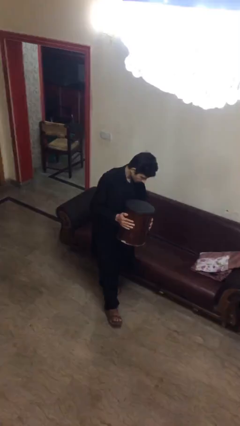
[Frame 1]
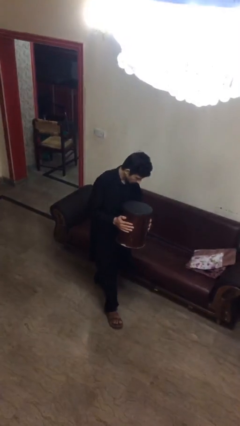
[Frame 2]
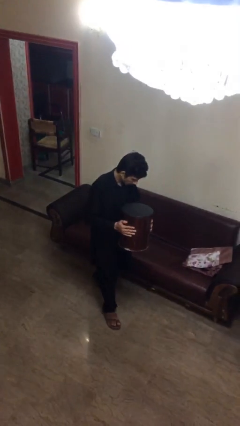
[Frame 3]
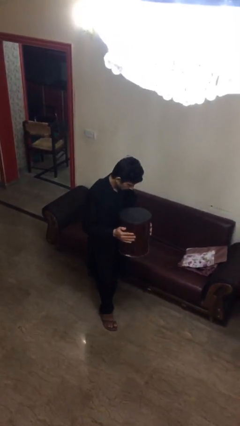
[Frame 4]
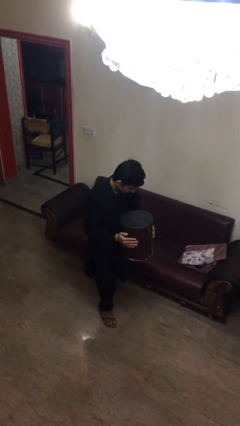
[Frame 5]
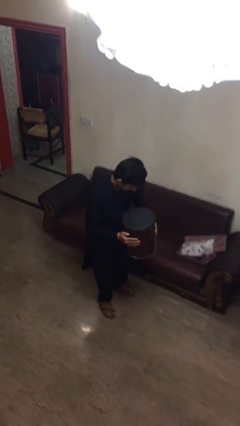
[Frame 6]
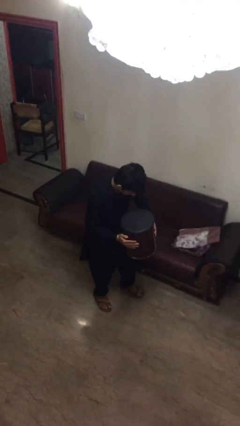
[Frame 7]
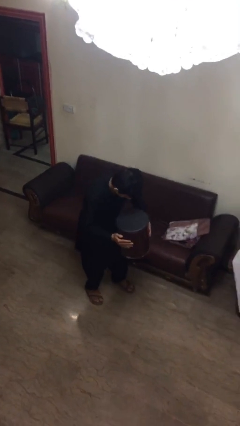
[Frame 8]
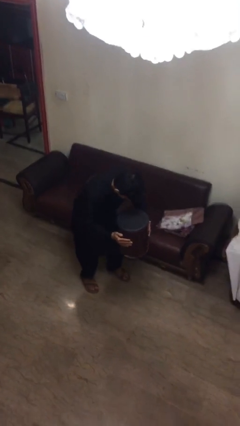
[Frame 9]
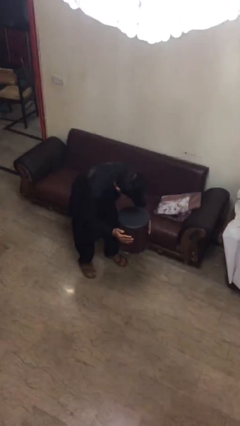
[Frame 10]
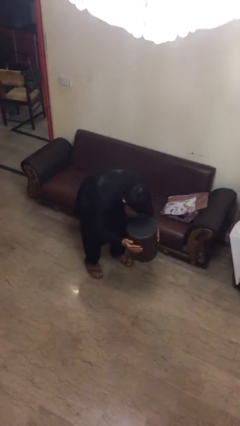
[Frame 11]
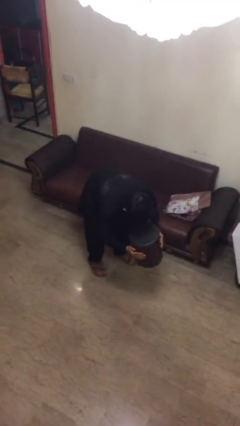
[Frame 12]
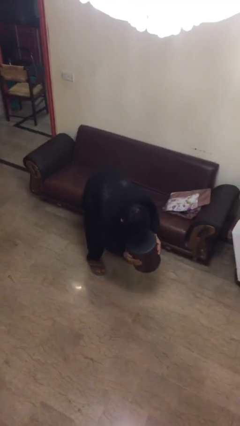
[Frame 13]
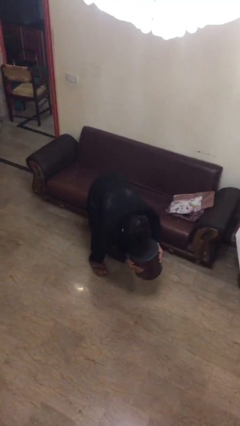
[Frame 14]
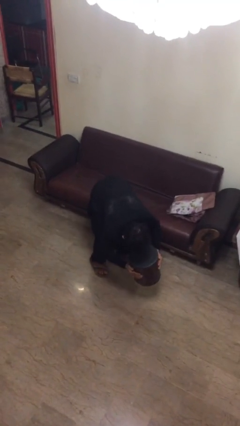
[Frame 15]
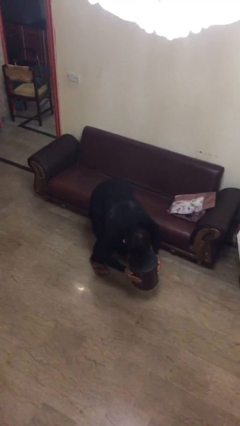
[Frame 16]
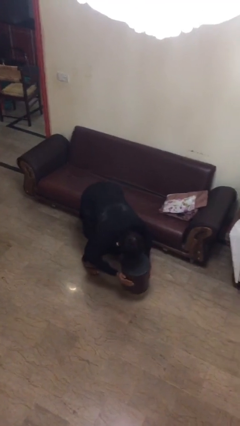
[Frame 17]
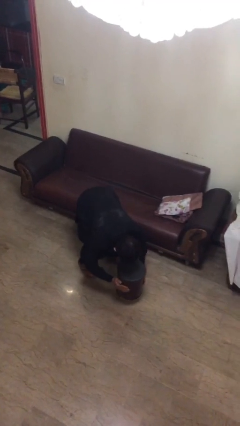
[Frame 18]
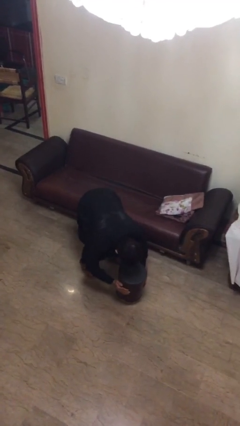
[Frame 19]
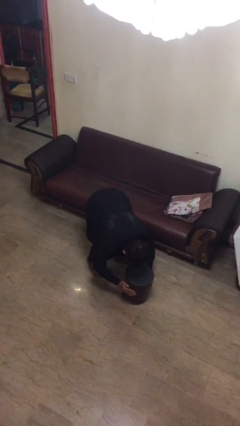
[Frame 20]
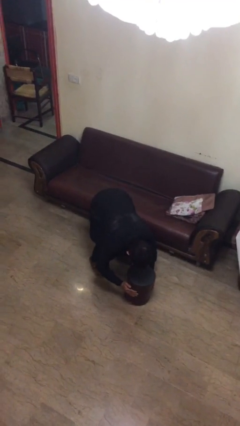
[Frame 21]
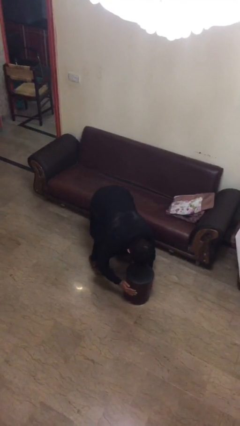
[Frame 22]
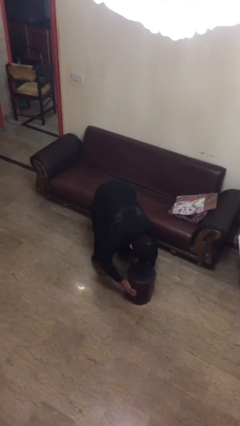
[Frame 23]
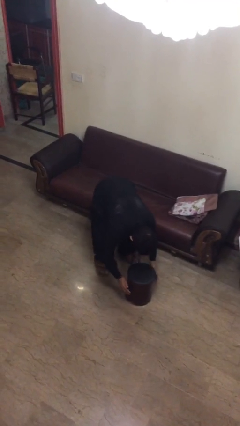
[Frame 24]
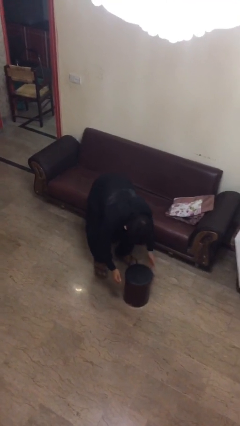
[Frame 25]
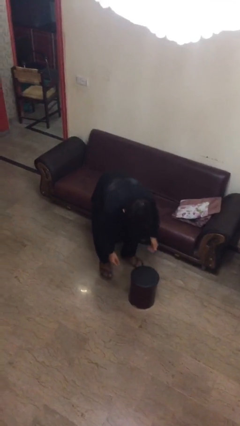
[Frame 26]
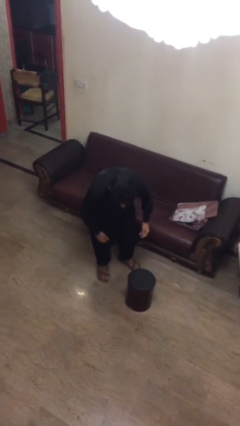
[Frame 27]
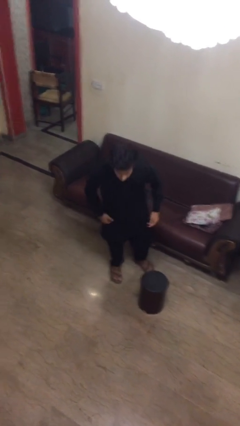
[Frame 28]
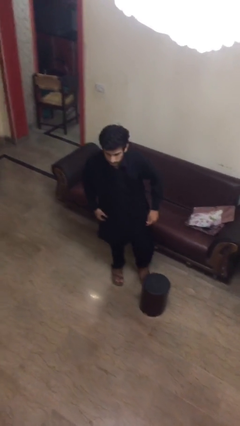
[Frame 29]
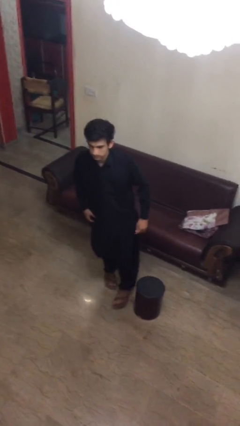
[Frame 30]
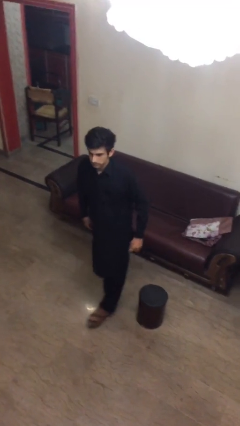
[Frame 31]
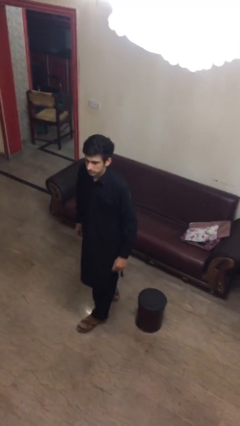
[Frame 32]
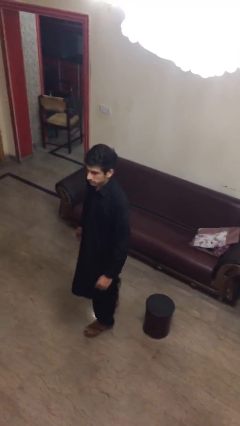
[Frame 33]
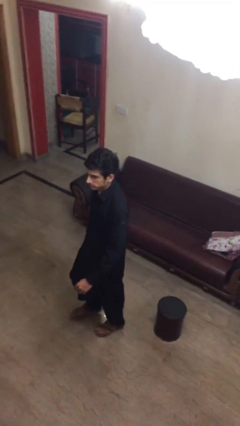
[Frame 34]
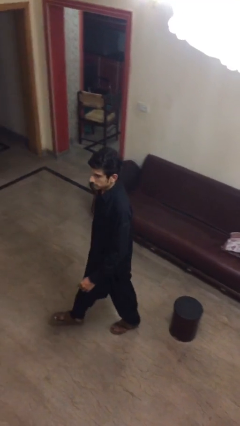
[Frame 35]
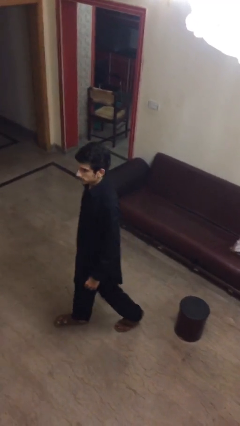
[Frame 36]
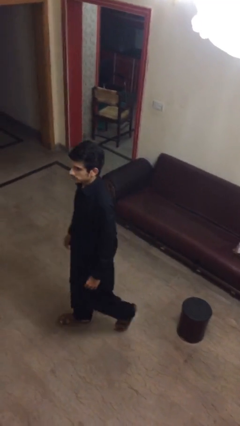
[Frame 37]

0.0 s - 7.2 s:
person puts down object on floor

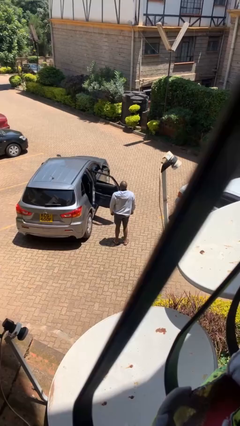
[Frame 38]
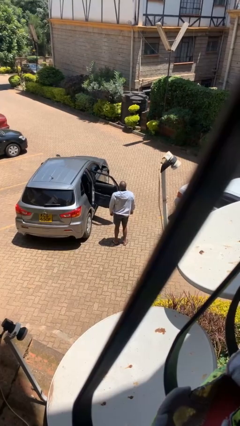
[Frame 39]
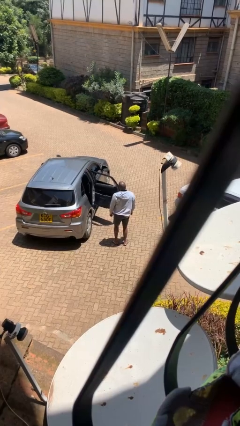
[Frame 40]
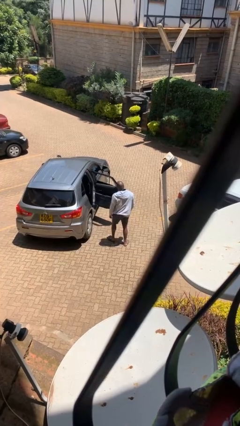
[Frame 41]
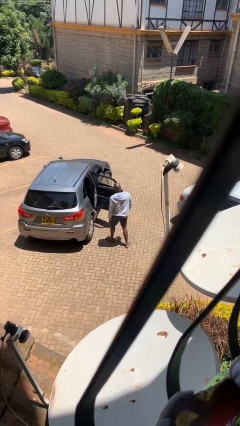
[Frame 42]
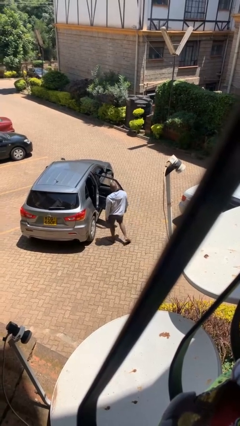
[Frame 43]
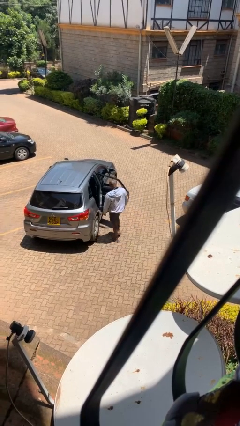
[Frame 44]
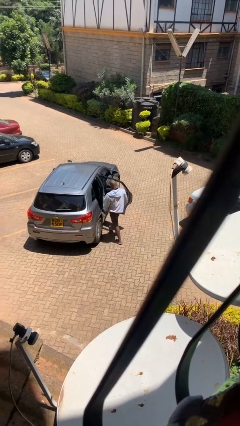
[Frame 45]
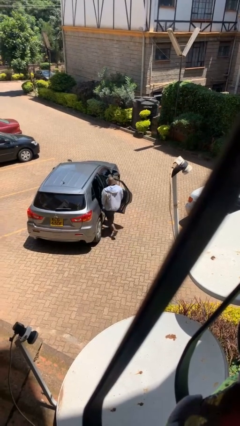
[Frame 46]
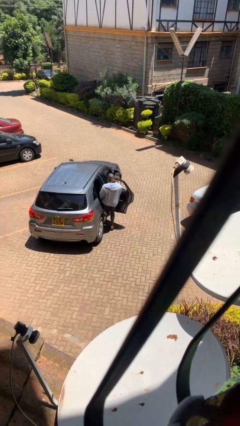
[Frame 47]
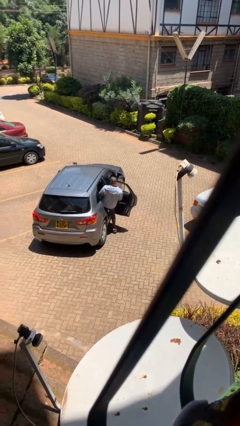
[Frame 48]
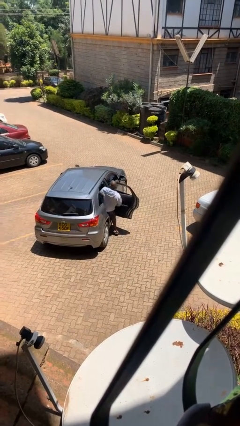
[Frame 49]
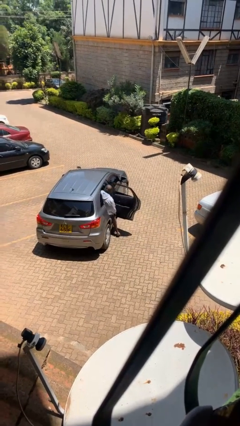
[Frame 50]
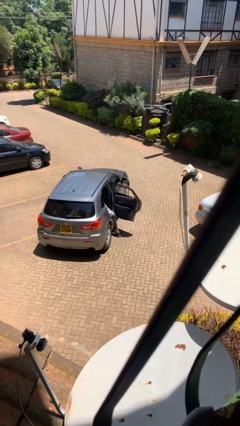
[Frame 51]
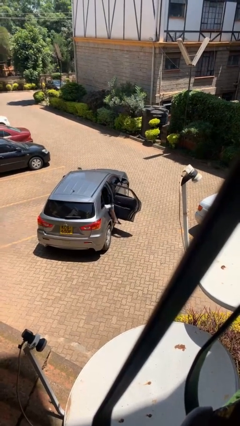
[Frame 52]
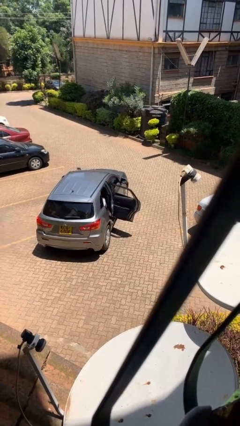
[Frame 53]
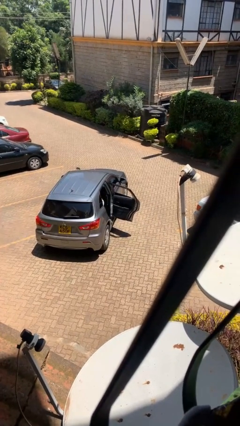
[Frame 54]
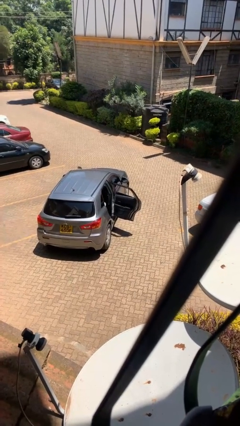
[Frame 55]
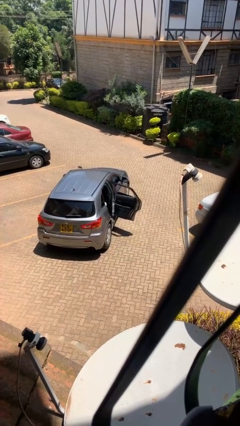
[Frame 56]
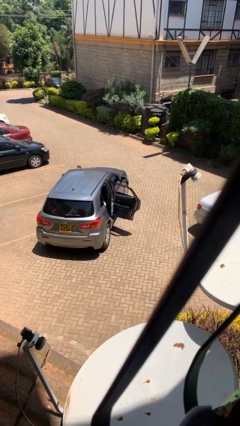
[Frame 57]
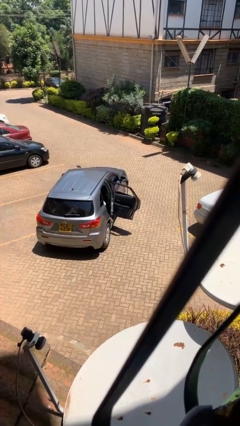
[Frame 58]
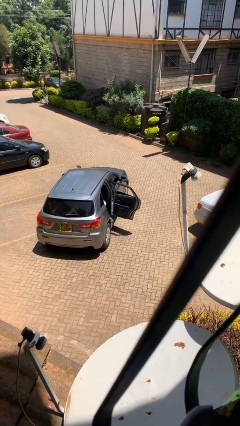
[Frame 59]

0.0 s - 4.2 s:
person enters car

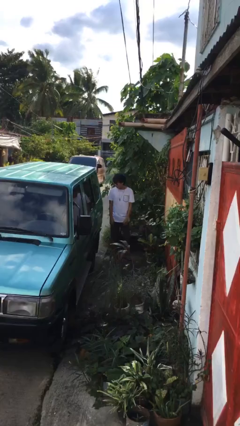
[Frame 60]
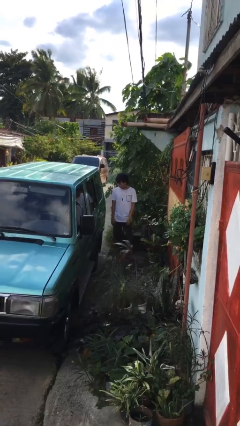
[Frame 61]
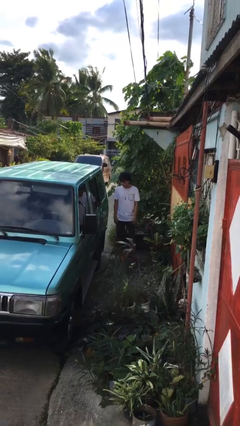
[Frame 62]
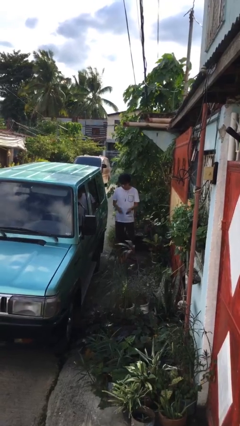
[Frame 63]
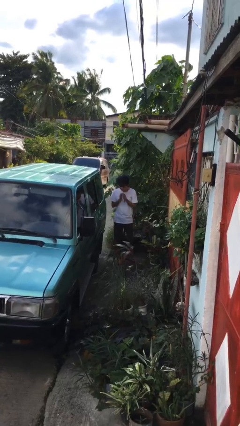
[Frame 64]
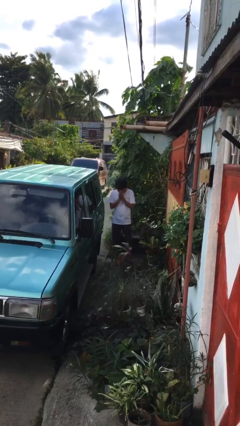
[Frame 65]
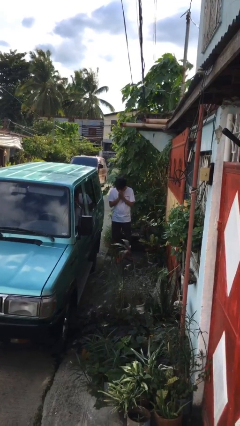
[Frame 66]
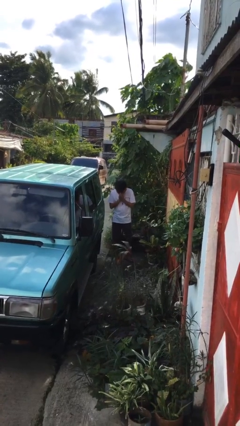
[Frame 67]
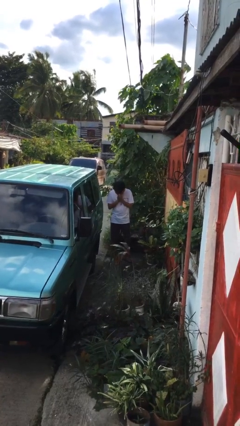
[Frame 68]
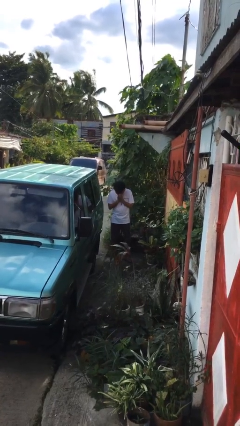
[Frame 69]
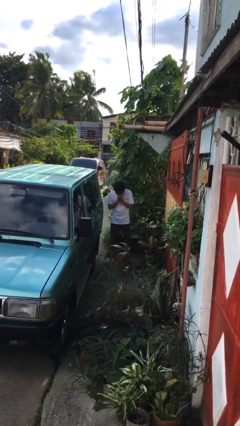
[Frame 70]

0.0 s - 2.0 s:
person blows into hands

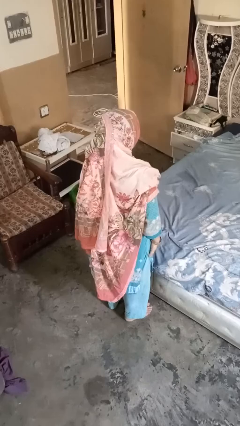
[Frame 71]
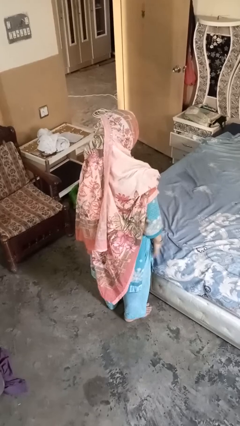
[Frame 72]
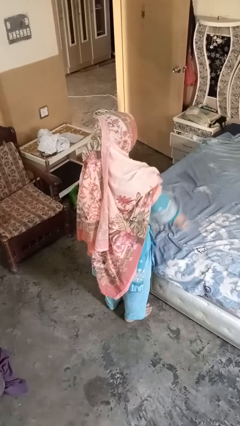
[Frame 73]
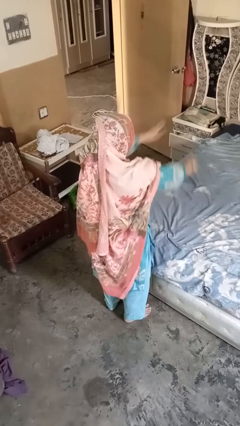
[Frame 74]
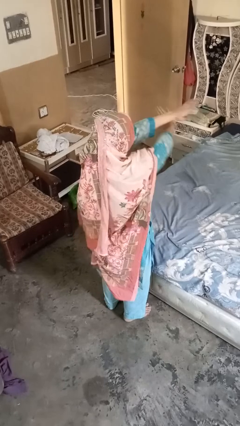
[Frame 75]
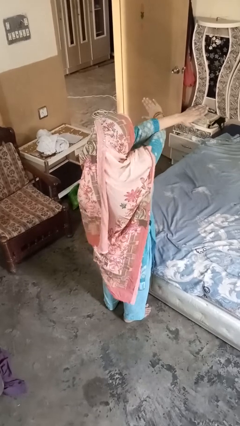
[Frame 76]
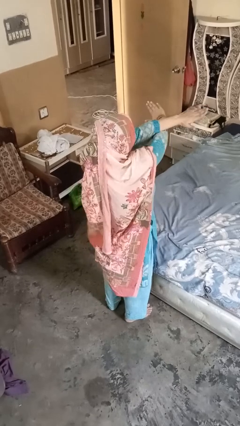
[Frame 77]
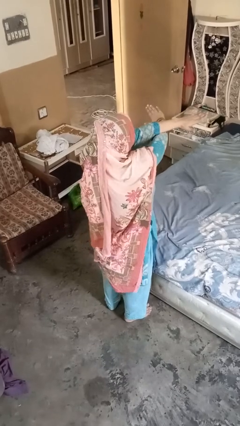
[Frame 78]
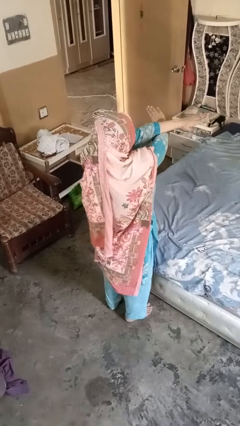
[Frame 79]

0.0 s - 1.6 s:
person gestures arms x

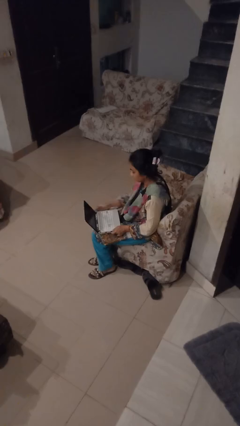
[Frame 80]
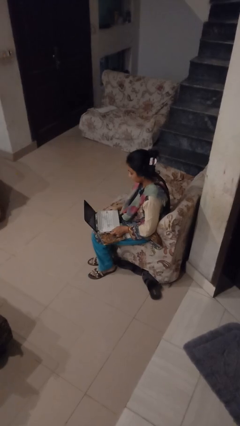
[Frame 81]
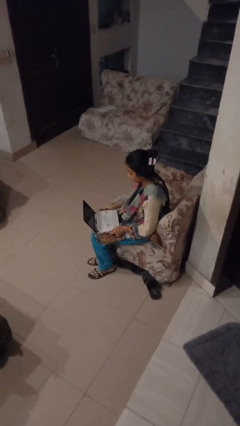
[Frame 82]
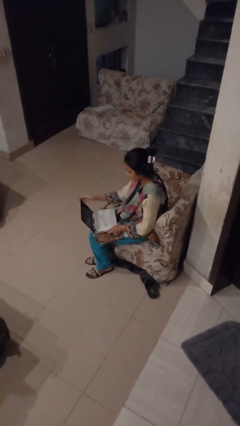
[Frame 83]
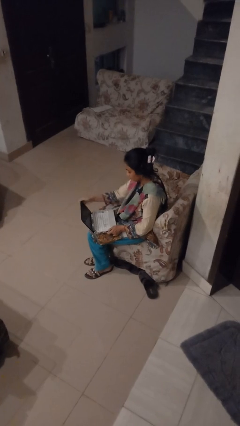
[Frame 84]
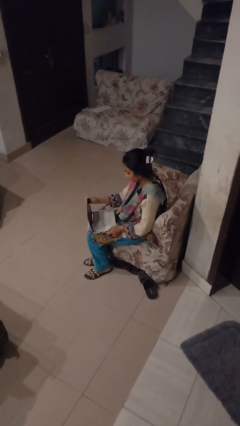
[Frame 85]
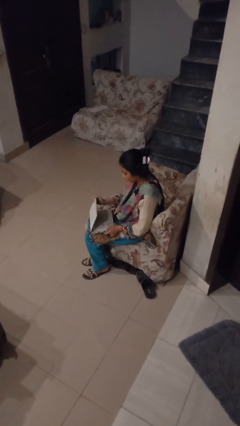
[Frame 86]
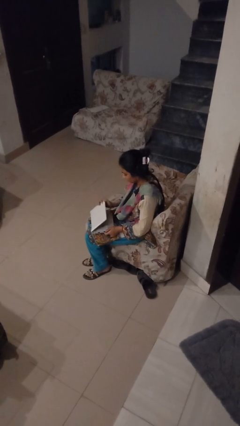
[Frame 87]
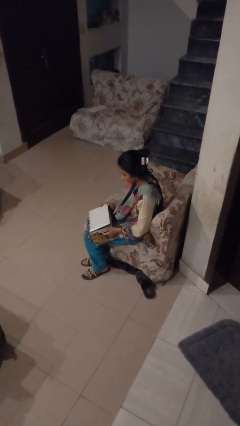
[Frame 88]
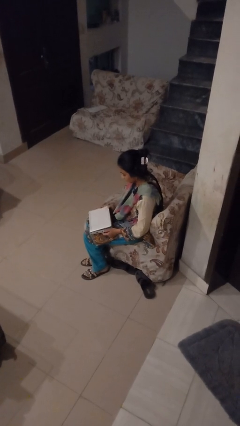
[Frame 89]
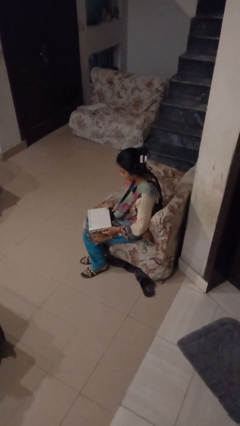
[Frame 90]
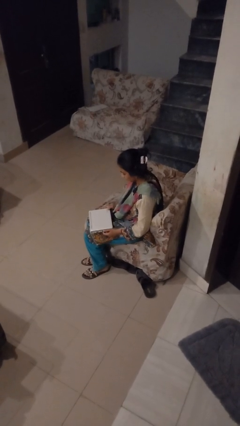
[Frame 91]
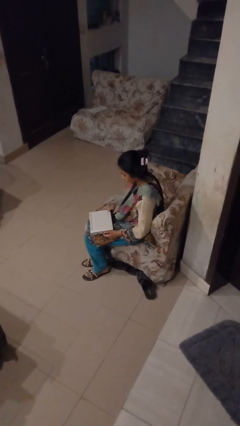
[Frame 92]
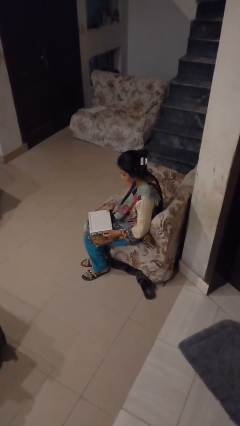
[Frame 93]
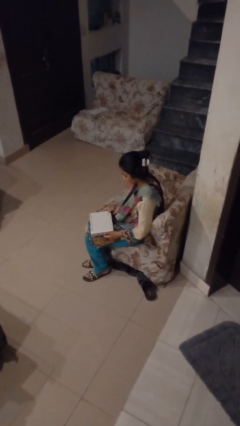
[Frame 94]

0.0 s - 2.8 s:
person closes laptop
